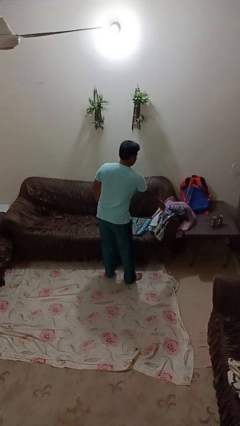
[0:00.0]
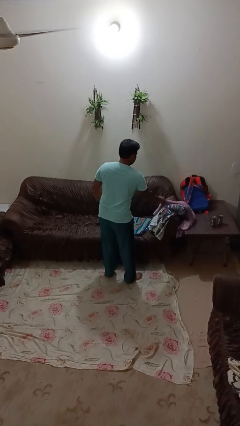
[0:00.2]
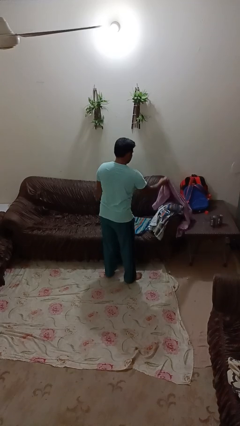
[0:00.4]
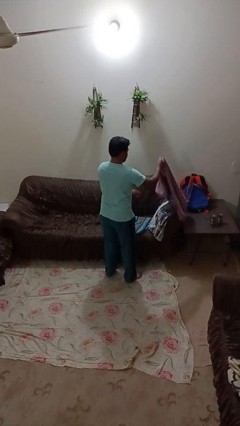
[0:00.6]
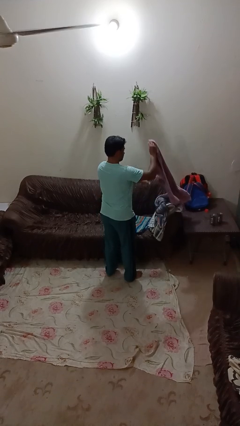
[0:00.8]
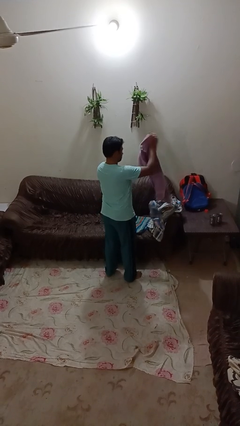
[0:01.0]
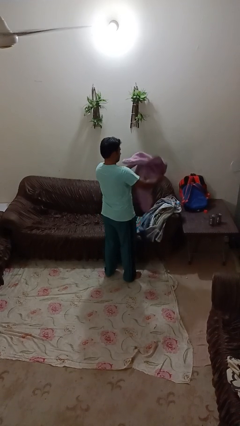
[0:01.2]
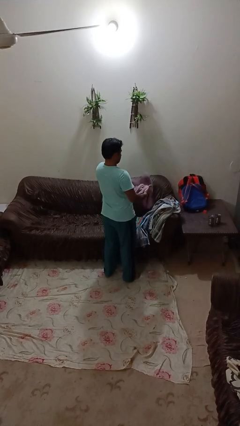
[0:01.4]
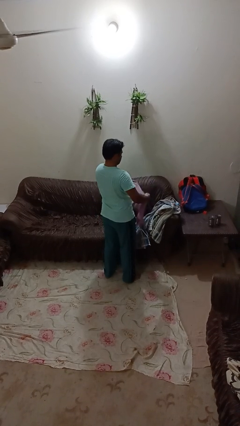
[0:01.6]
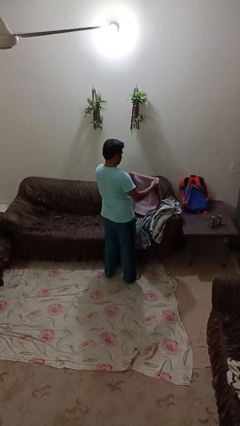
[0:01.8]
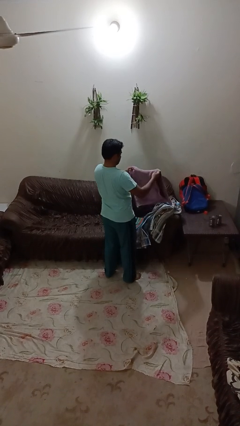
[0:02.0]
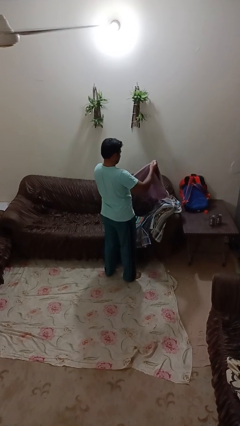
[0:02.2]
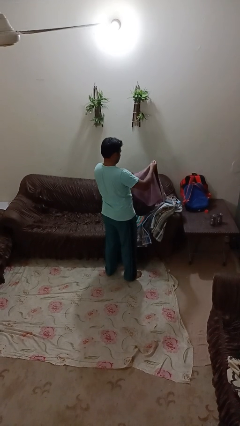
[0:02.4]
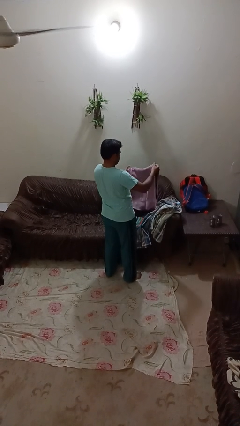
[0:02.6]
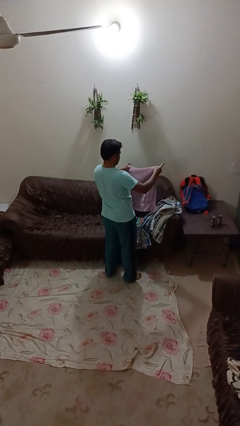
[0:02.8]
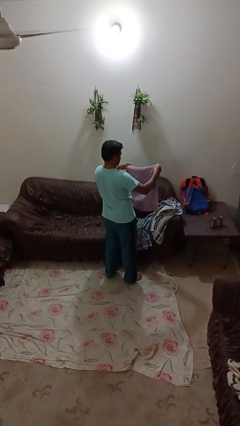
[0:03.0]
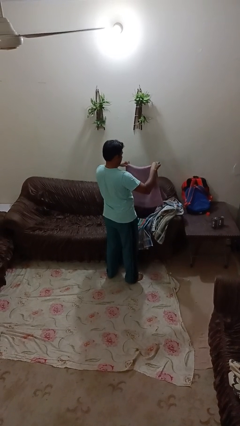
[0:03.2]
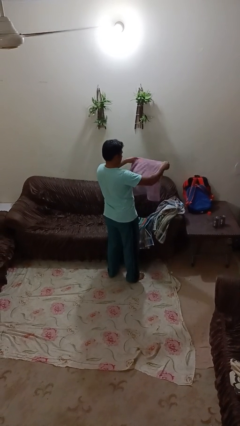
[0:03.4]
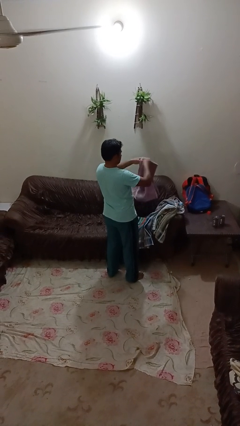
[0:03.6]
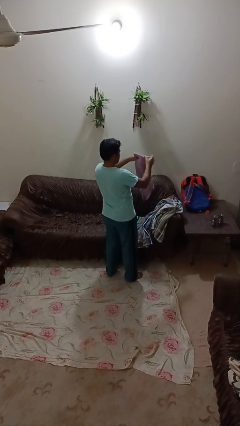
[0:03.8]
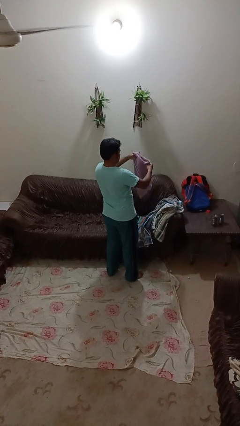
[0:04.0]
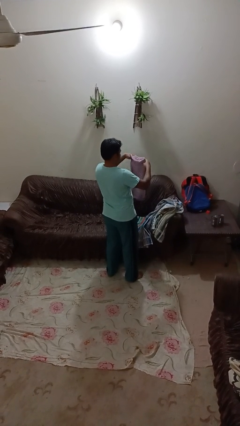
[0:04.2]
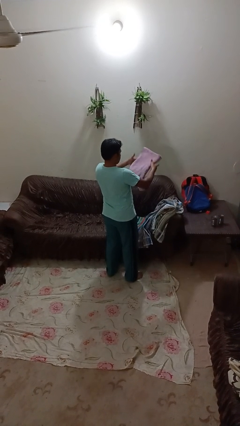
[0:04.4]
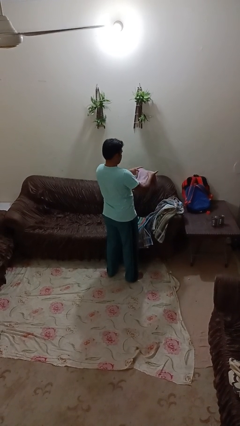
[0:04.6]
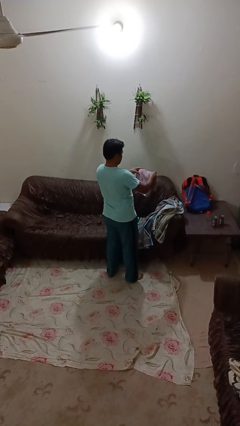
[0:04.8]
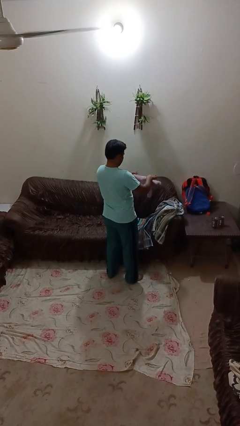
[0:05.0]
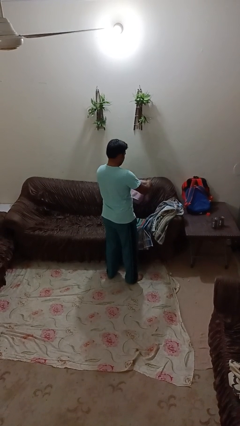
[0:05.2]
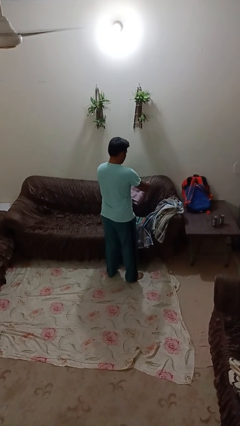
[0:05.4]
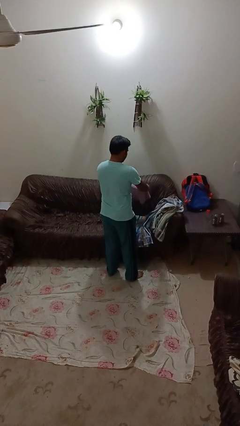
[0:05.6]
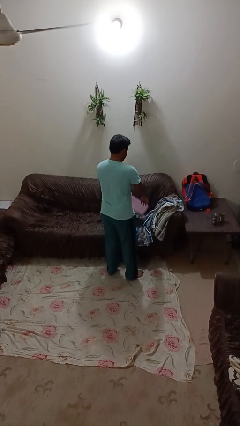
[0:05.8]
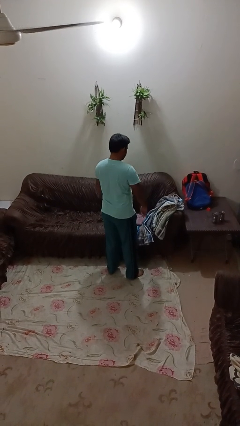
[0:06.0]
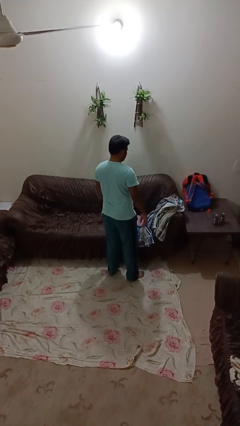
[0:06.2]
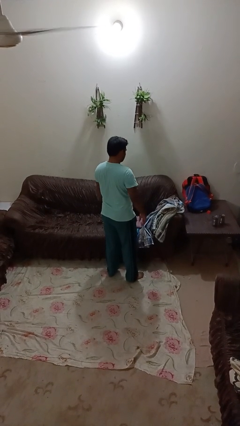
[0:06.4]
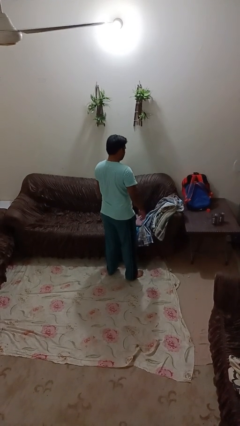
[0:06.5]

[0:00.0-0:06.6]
person folds towel

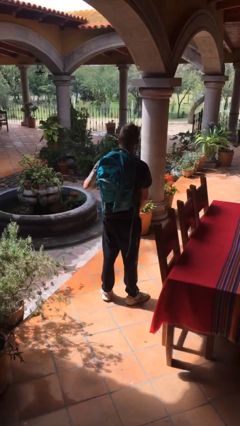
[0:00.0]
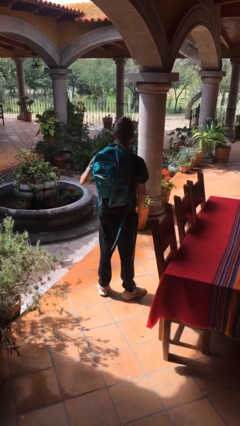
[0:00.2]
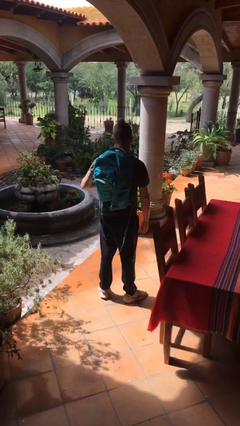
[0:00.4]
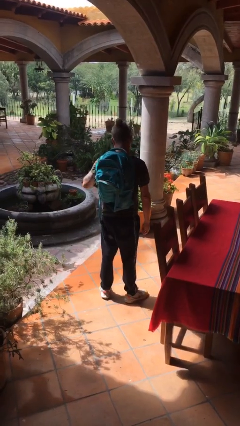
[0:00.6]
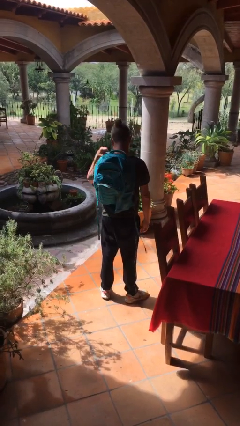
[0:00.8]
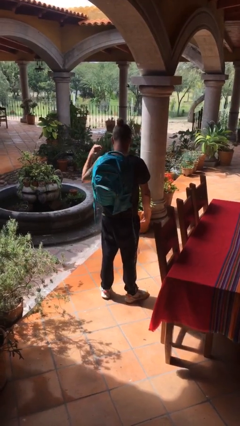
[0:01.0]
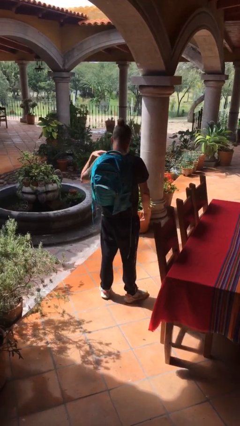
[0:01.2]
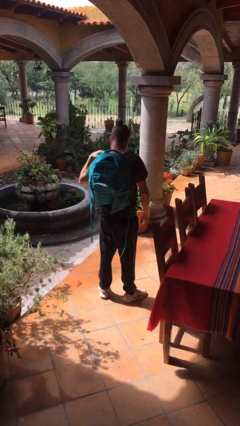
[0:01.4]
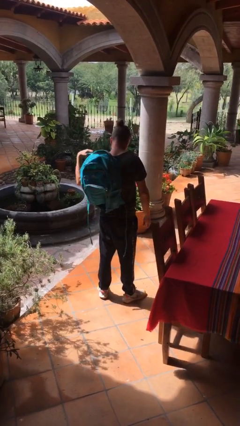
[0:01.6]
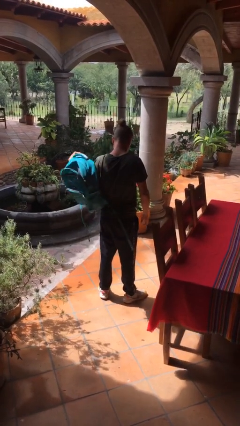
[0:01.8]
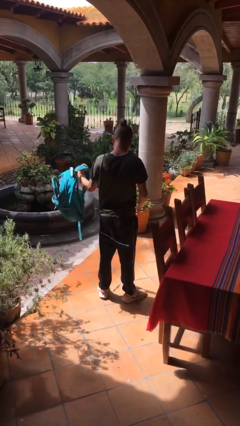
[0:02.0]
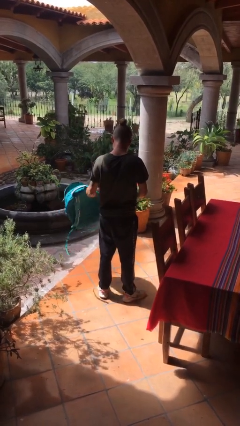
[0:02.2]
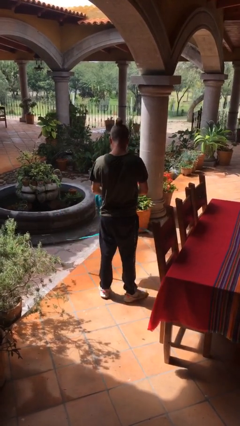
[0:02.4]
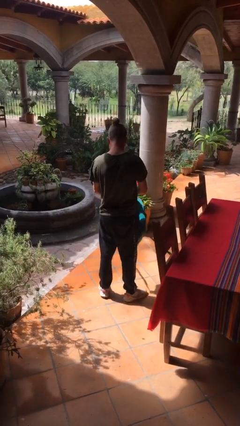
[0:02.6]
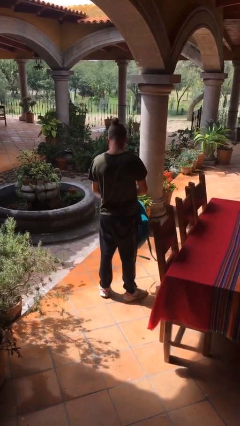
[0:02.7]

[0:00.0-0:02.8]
person takes off backpack

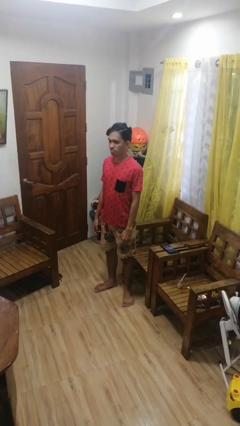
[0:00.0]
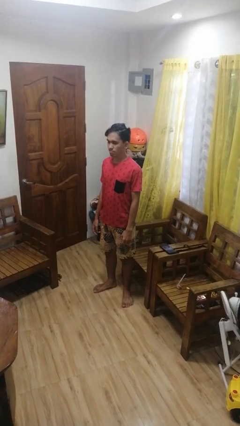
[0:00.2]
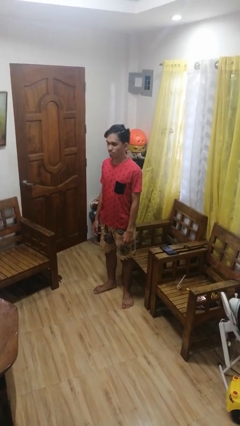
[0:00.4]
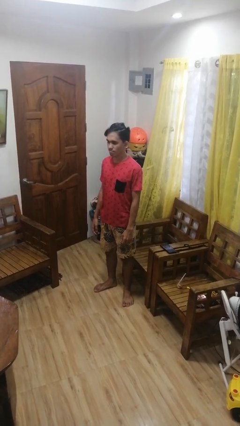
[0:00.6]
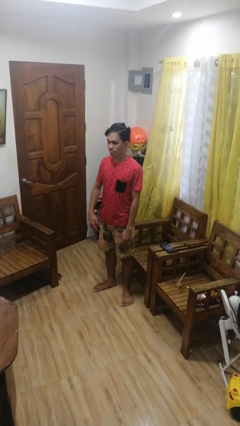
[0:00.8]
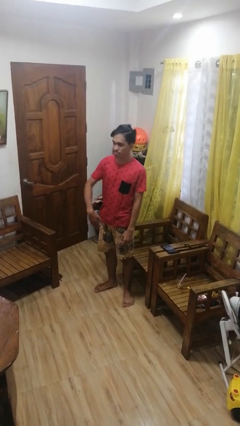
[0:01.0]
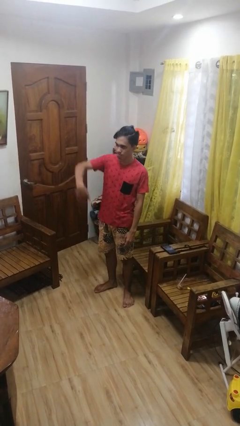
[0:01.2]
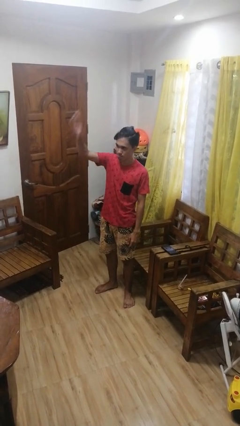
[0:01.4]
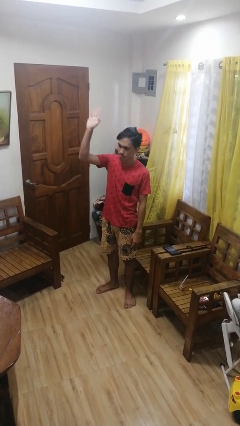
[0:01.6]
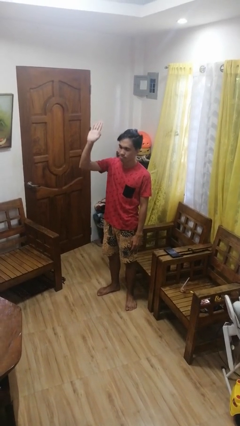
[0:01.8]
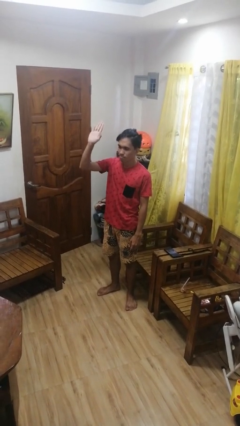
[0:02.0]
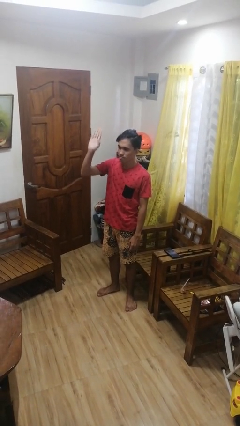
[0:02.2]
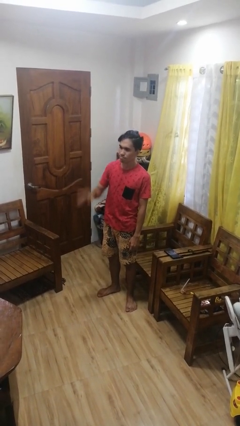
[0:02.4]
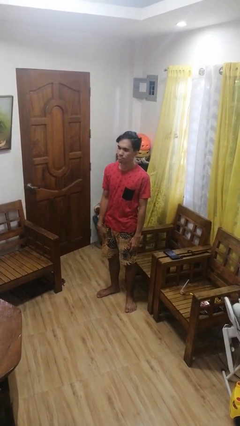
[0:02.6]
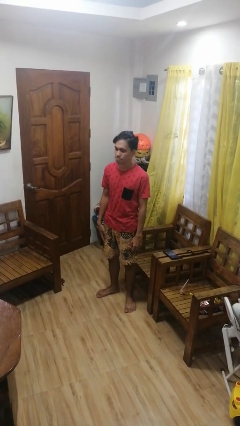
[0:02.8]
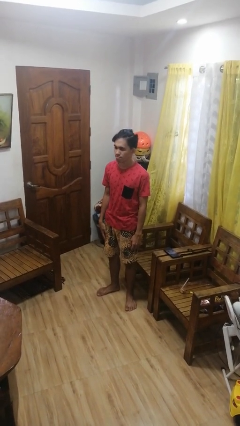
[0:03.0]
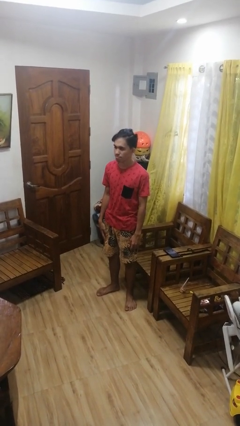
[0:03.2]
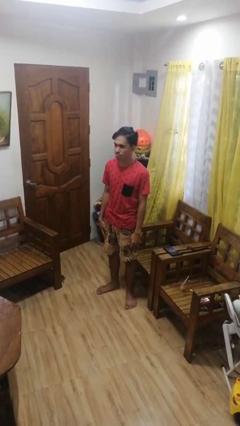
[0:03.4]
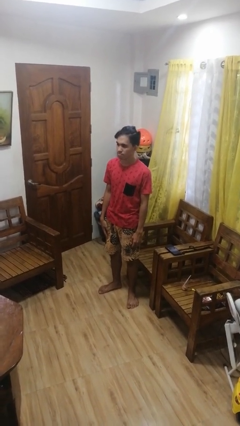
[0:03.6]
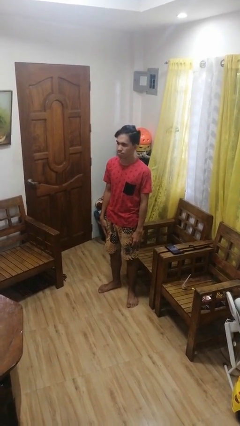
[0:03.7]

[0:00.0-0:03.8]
person gestures swipe up

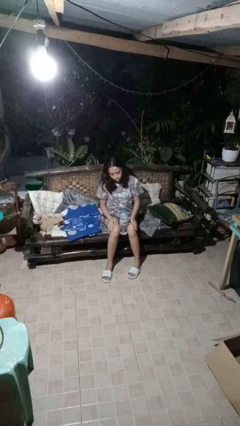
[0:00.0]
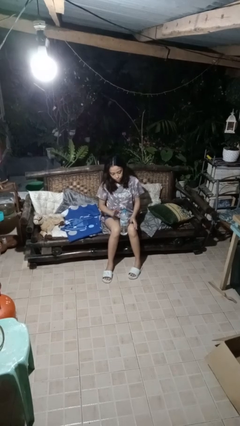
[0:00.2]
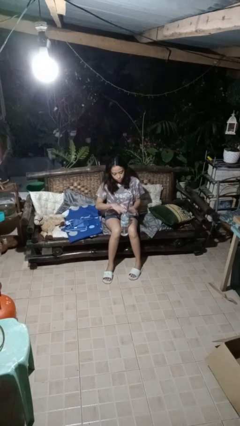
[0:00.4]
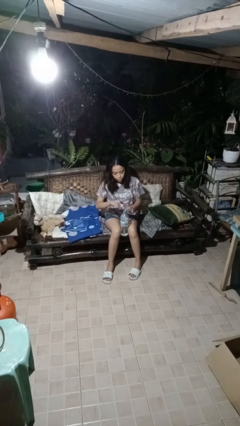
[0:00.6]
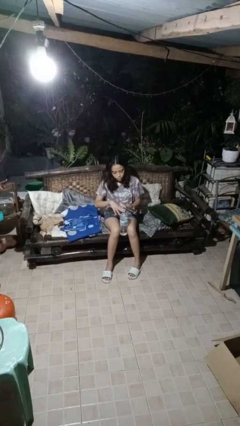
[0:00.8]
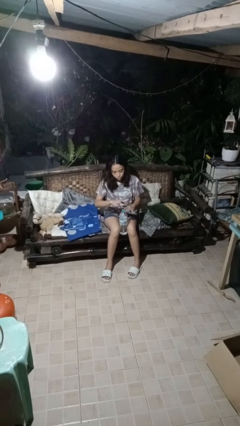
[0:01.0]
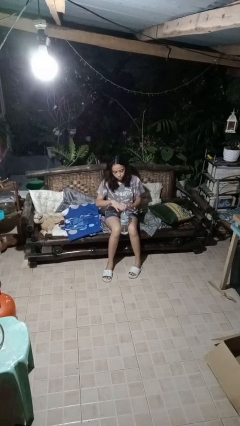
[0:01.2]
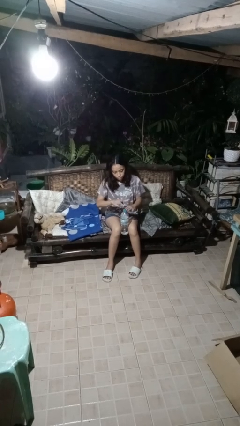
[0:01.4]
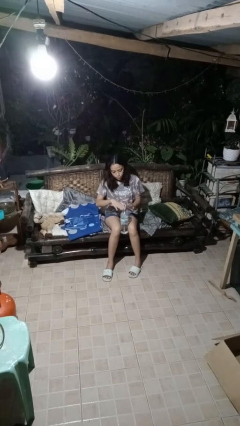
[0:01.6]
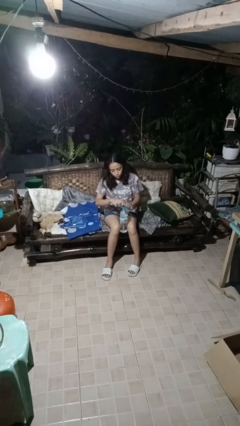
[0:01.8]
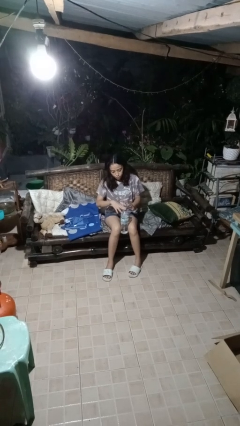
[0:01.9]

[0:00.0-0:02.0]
person taps object with finger

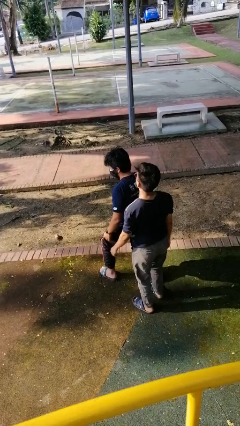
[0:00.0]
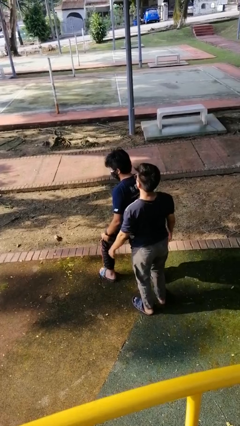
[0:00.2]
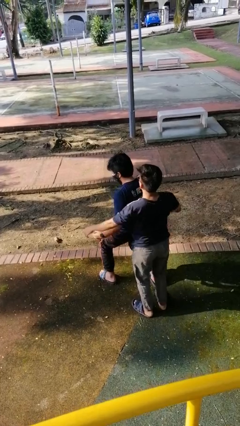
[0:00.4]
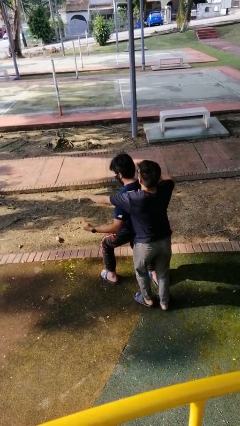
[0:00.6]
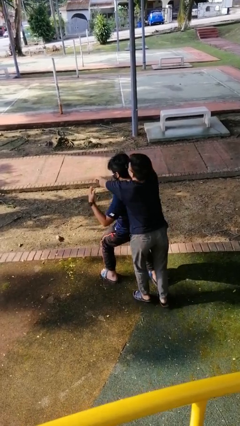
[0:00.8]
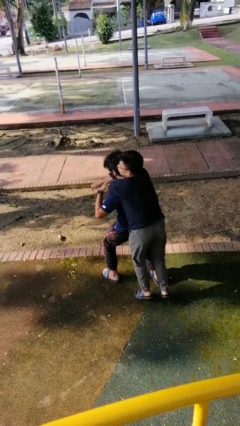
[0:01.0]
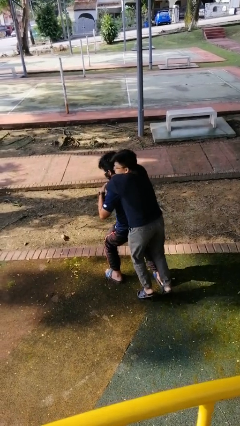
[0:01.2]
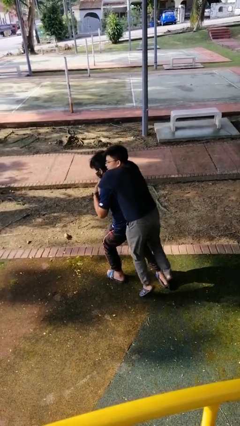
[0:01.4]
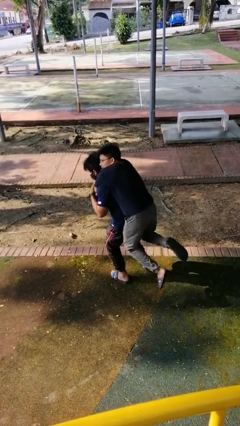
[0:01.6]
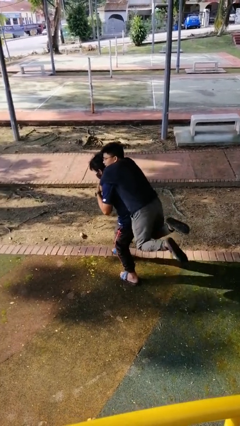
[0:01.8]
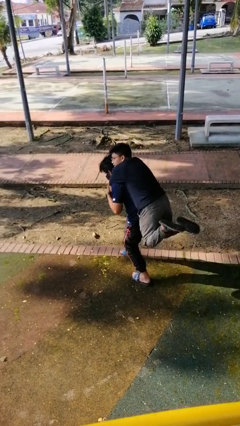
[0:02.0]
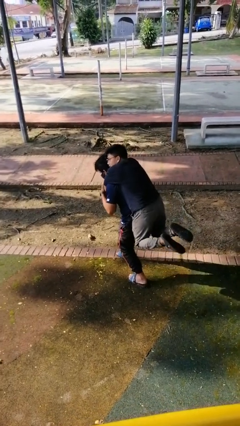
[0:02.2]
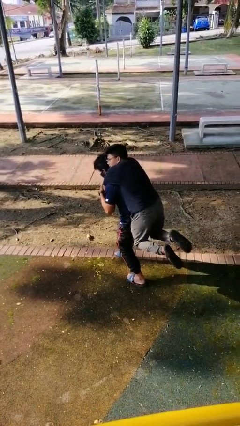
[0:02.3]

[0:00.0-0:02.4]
person carries person over shoulder

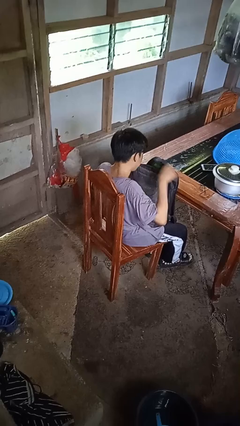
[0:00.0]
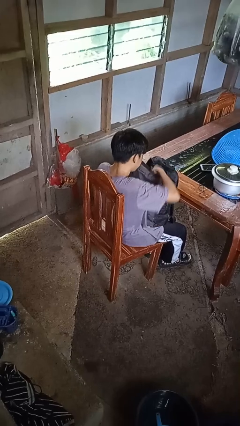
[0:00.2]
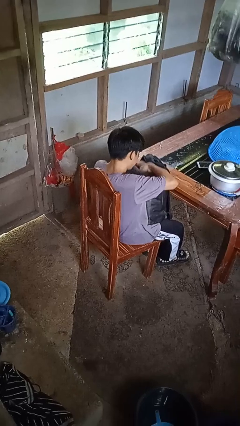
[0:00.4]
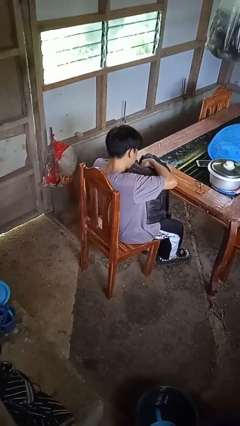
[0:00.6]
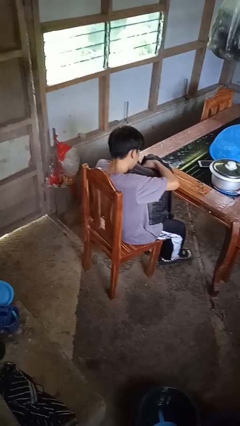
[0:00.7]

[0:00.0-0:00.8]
person searches in backpack
